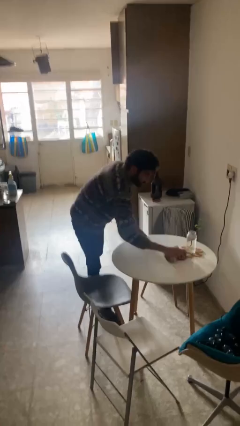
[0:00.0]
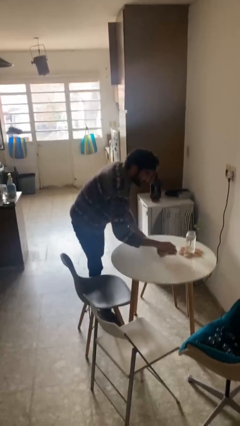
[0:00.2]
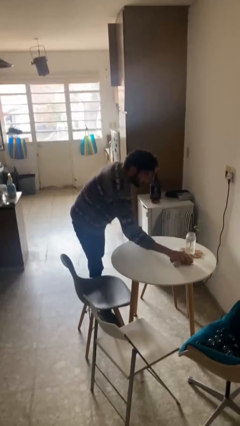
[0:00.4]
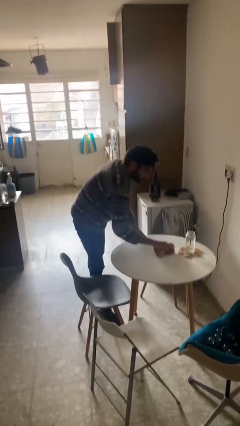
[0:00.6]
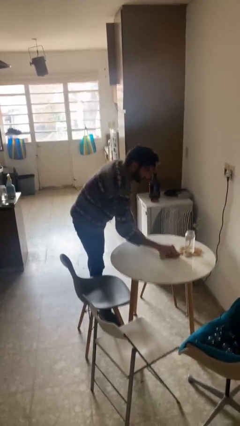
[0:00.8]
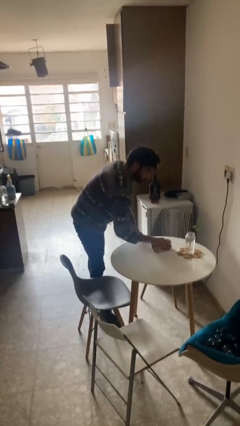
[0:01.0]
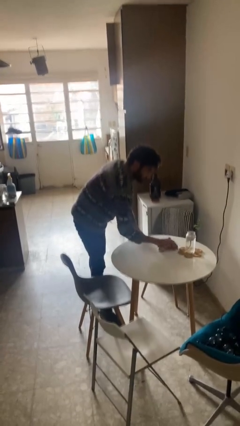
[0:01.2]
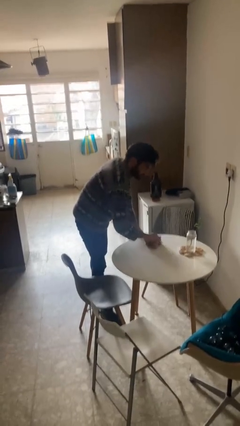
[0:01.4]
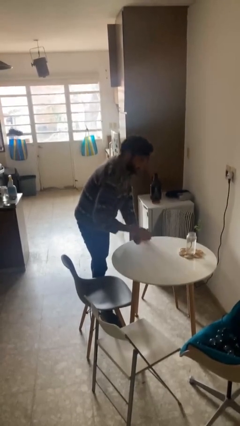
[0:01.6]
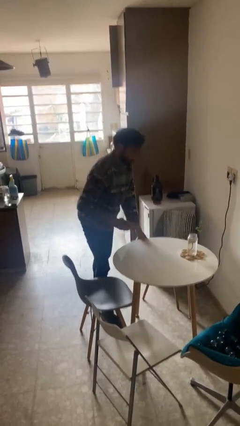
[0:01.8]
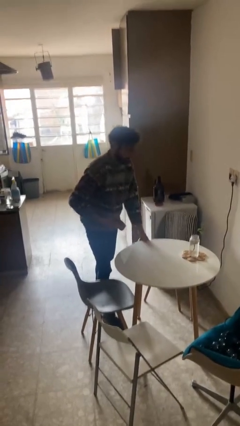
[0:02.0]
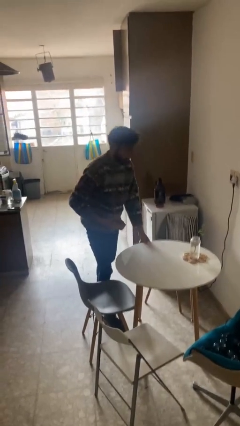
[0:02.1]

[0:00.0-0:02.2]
person cleans table with rag

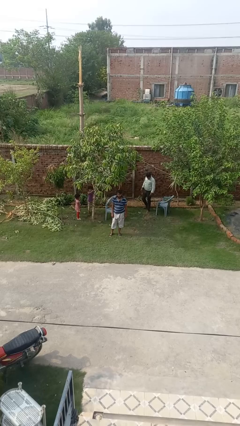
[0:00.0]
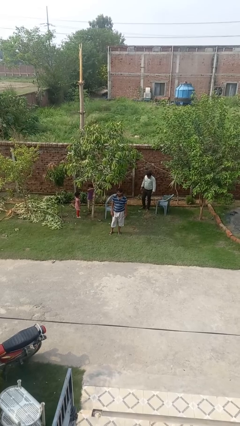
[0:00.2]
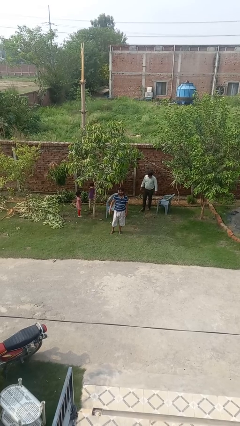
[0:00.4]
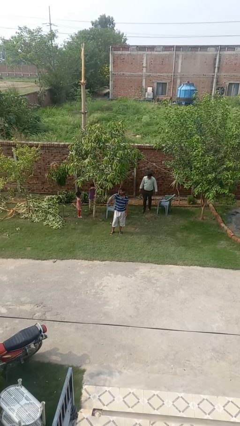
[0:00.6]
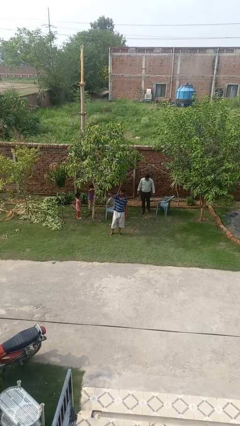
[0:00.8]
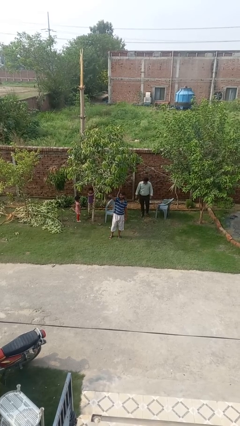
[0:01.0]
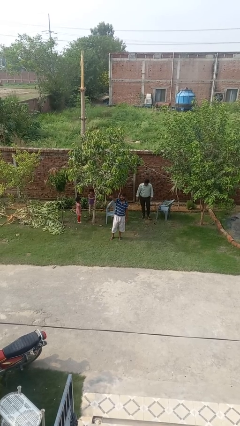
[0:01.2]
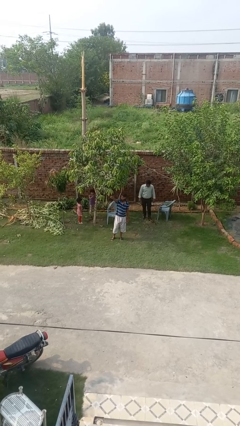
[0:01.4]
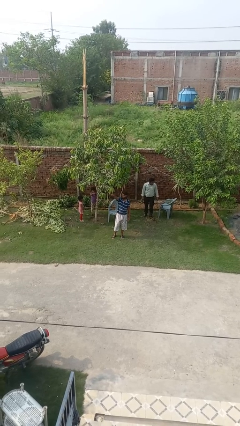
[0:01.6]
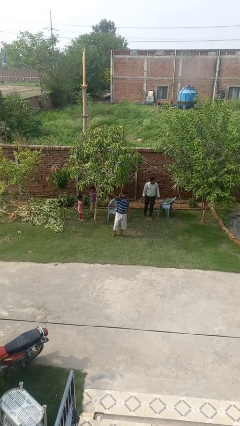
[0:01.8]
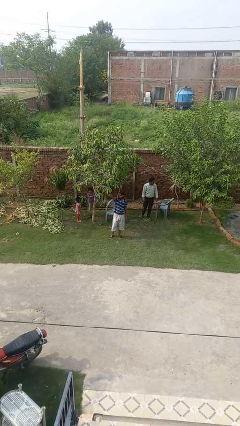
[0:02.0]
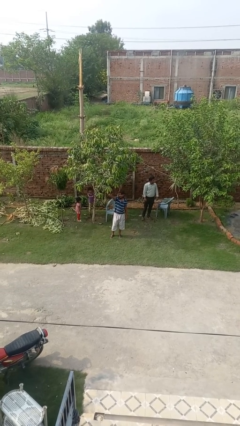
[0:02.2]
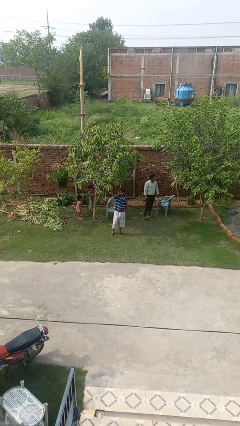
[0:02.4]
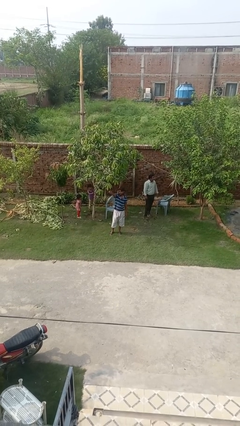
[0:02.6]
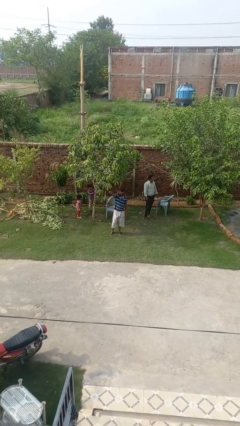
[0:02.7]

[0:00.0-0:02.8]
person points at person

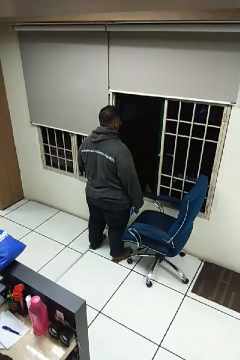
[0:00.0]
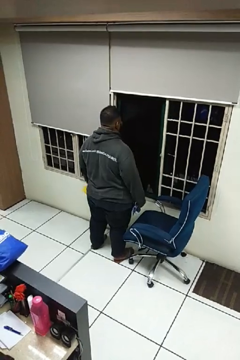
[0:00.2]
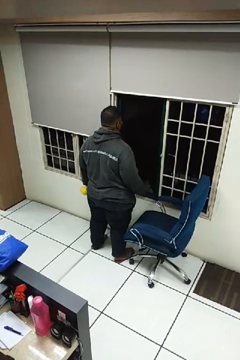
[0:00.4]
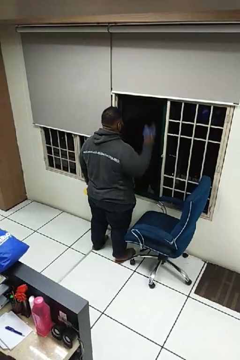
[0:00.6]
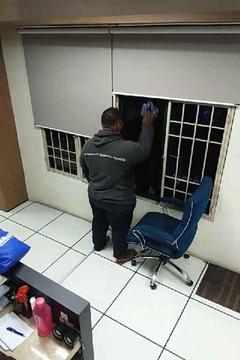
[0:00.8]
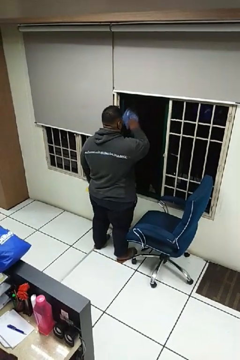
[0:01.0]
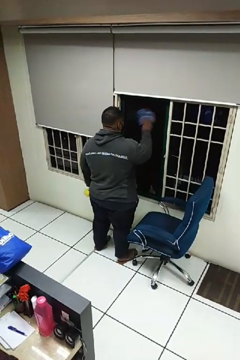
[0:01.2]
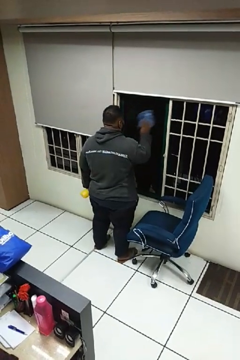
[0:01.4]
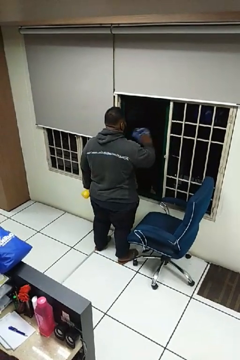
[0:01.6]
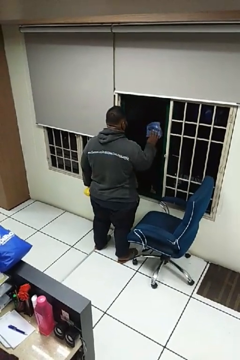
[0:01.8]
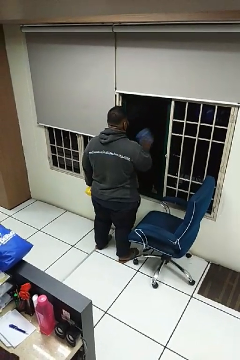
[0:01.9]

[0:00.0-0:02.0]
person washes window

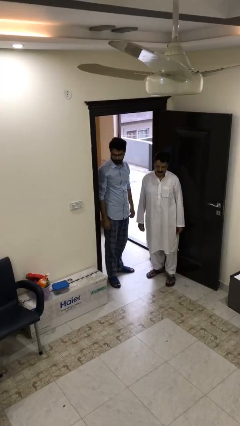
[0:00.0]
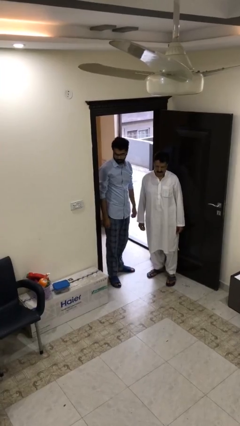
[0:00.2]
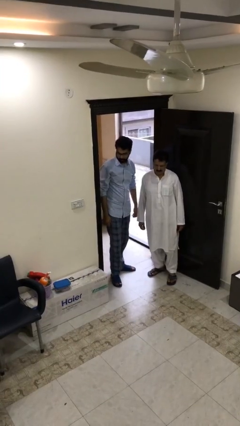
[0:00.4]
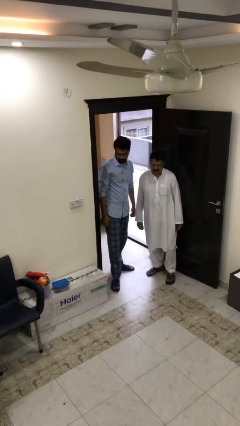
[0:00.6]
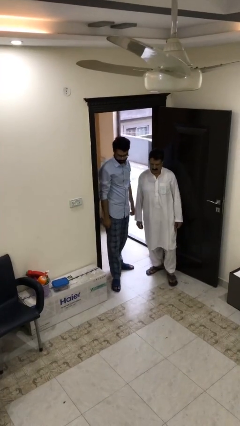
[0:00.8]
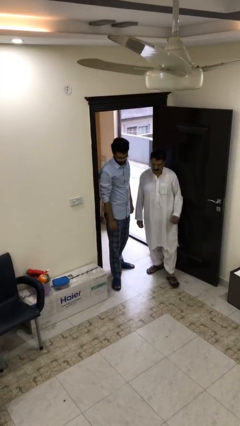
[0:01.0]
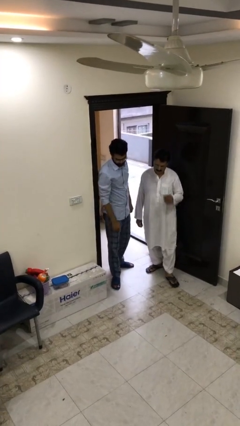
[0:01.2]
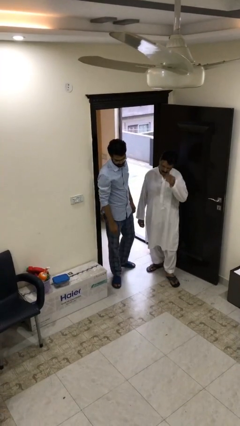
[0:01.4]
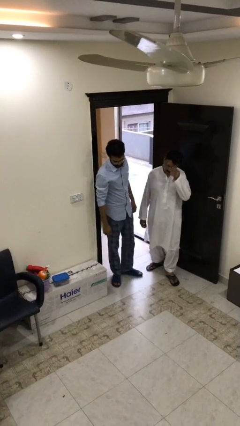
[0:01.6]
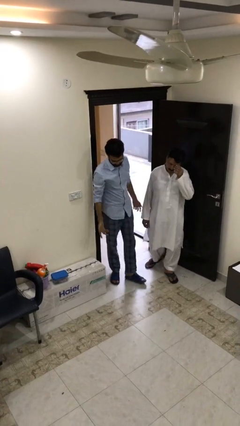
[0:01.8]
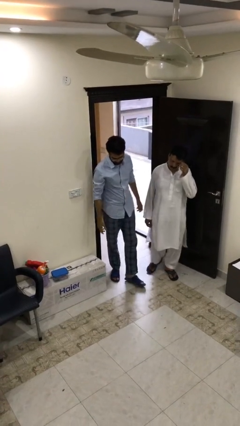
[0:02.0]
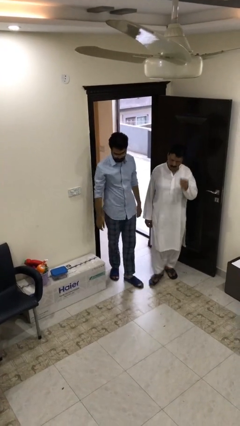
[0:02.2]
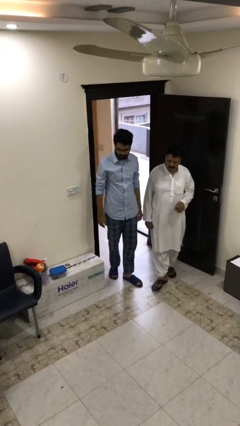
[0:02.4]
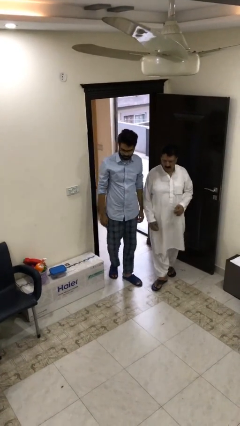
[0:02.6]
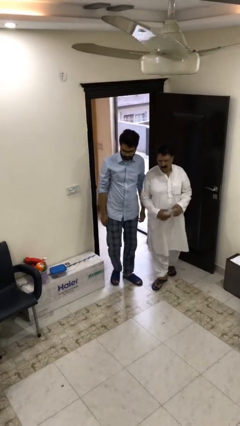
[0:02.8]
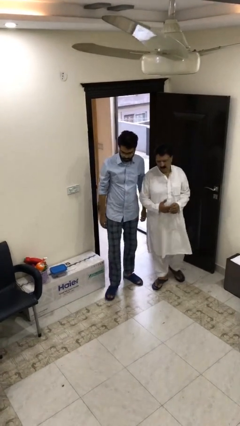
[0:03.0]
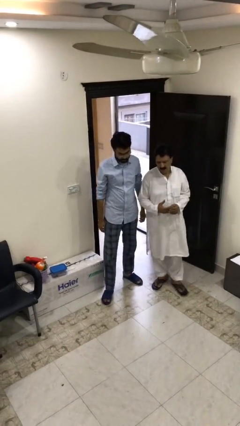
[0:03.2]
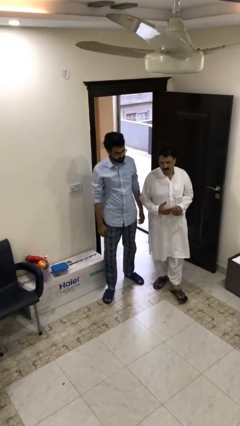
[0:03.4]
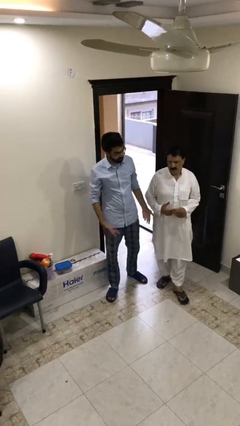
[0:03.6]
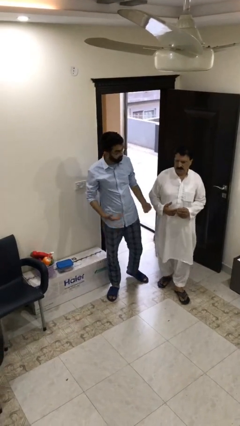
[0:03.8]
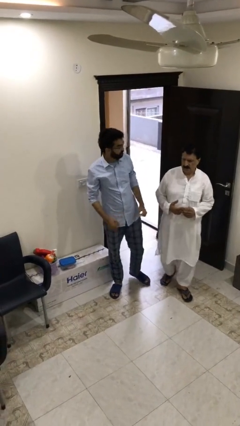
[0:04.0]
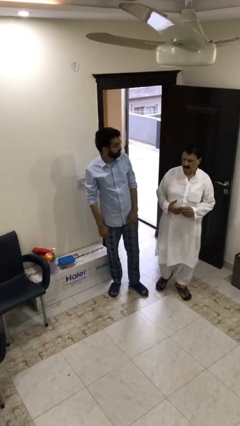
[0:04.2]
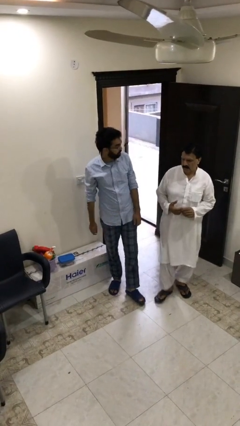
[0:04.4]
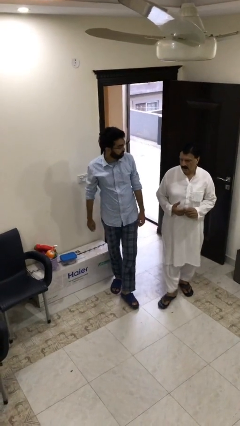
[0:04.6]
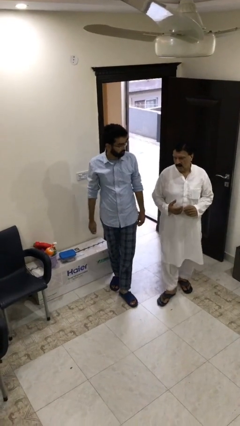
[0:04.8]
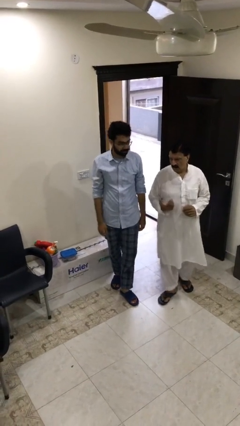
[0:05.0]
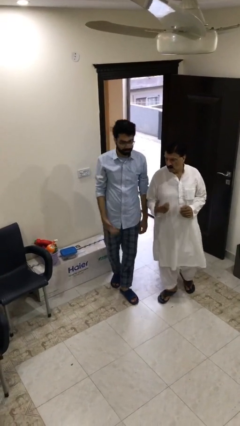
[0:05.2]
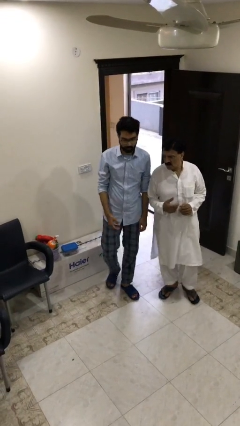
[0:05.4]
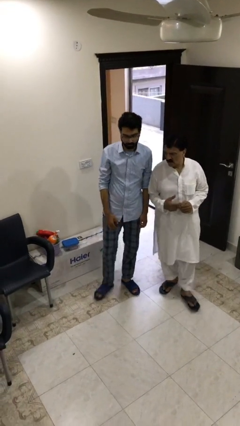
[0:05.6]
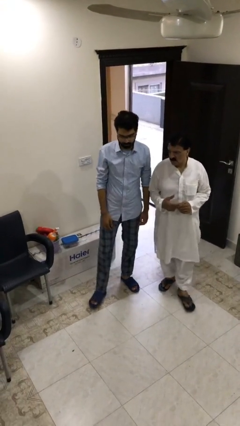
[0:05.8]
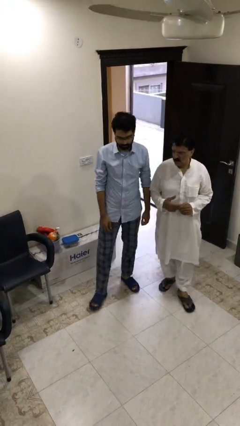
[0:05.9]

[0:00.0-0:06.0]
person talks to person

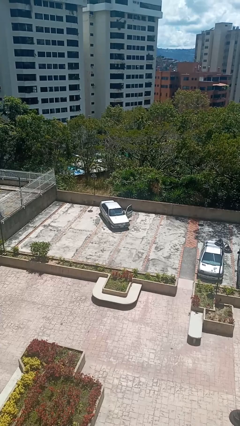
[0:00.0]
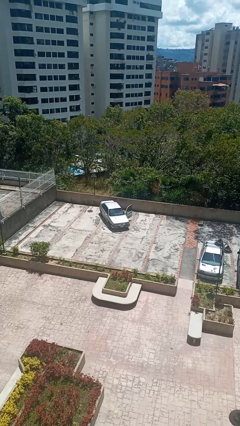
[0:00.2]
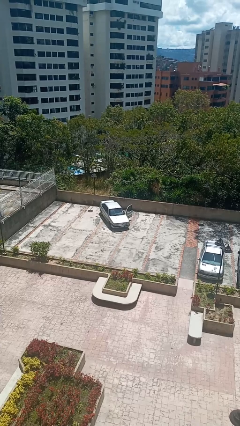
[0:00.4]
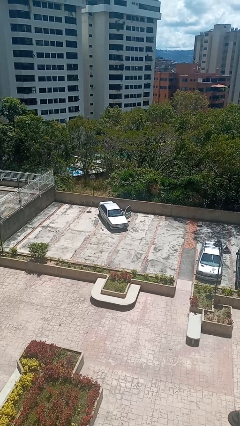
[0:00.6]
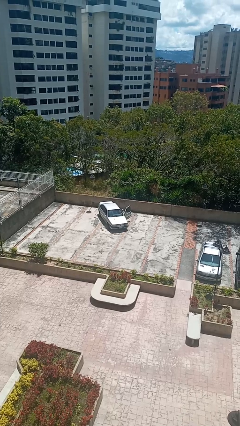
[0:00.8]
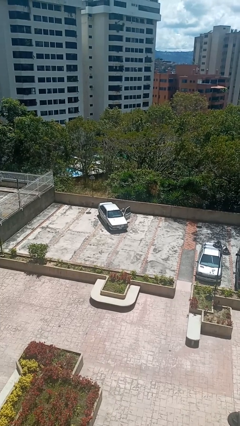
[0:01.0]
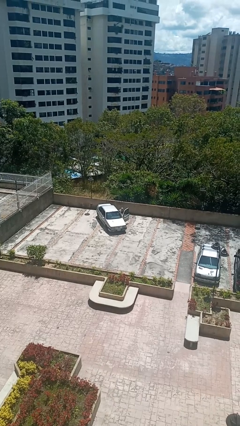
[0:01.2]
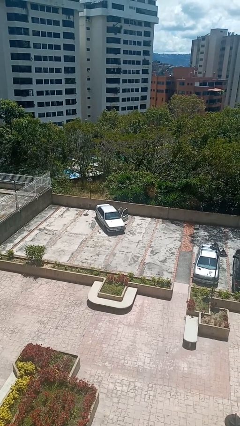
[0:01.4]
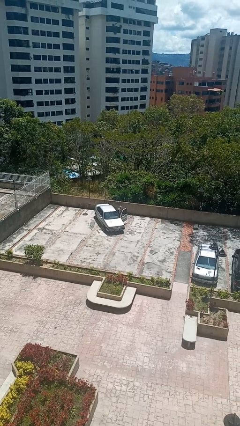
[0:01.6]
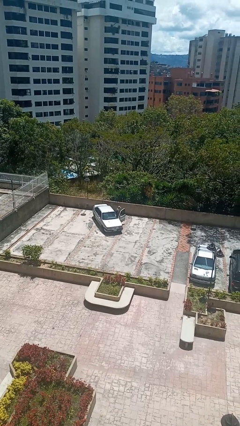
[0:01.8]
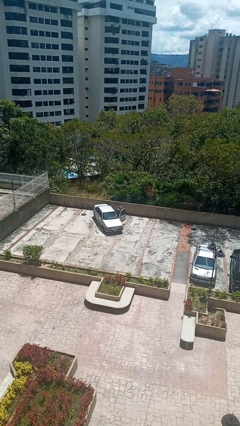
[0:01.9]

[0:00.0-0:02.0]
person exits car

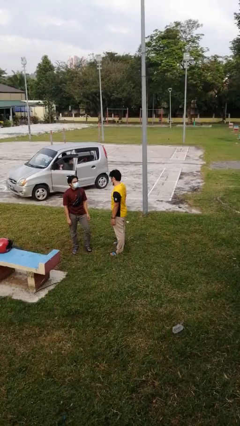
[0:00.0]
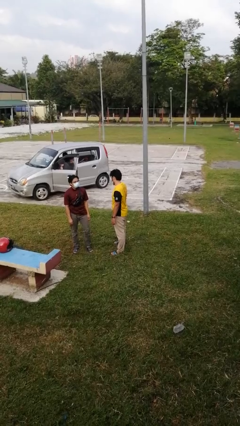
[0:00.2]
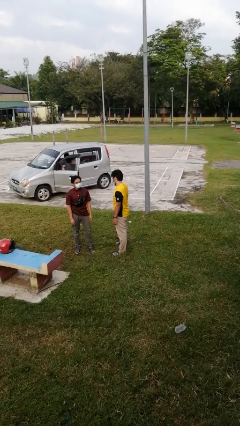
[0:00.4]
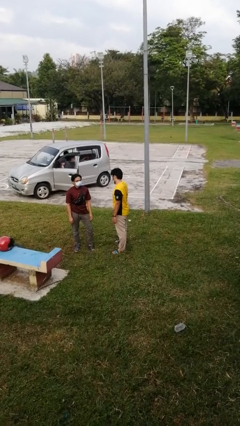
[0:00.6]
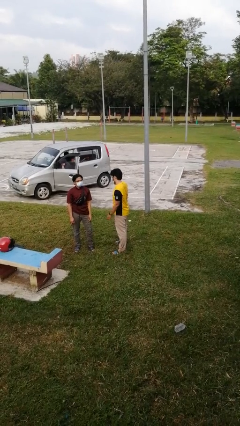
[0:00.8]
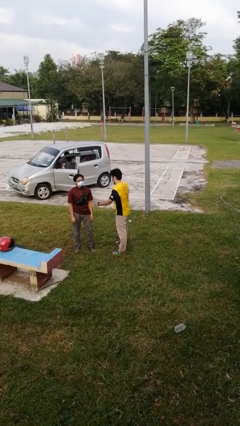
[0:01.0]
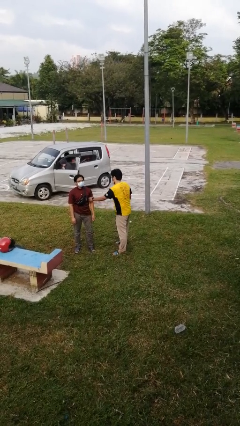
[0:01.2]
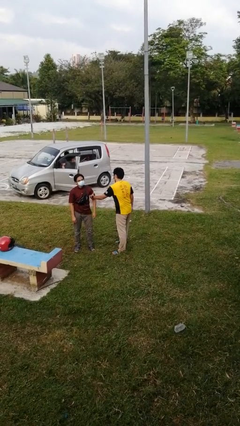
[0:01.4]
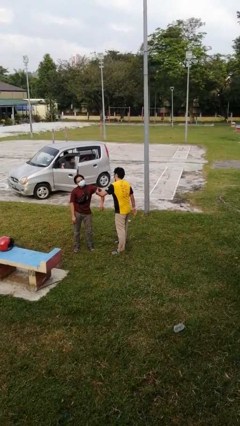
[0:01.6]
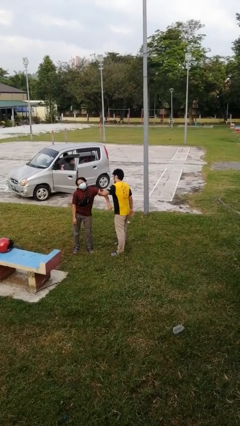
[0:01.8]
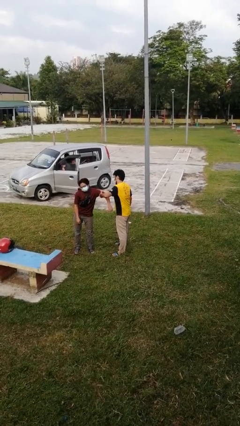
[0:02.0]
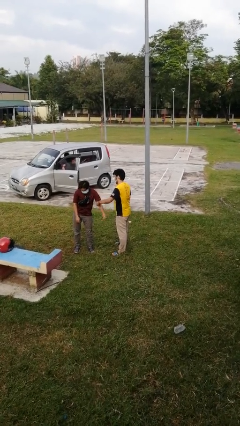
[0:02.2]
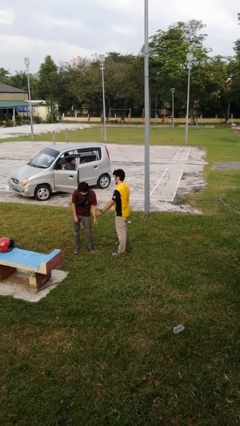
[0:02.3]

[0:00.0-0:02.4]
person grabs person by bicep

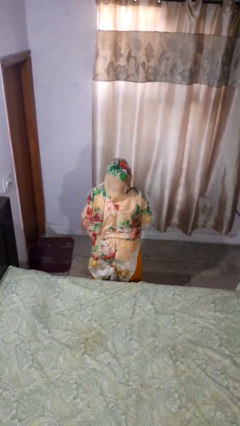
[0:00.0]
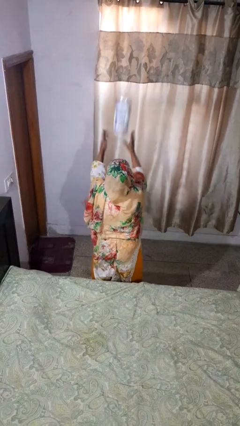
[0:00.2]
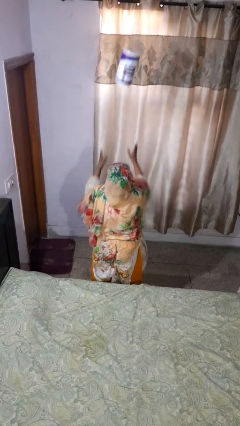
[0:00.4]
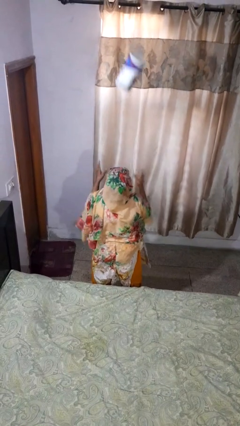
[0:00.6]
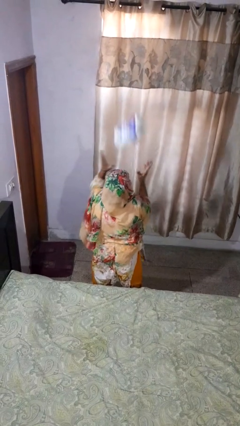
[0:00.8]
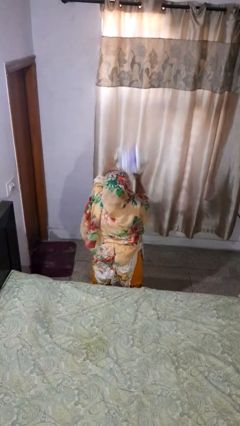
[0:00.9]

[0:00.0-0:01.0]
person drops object
